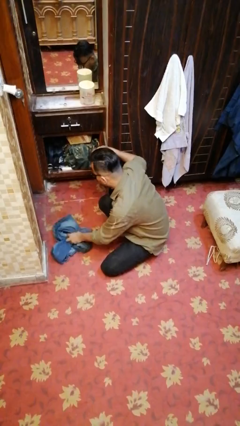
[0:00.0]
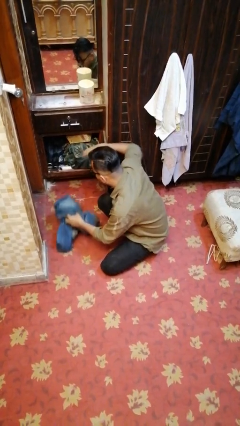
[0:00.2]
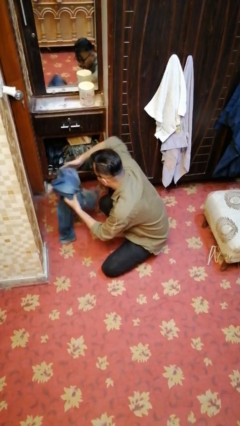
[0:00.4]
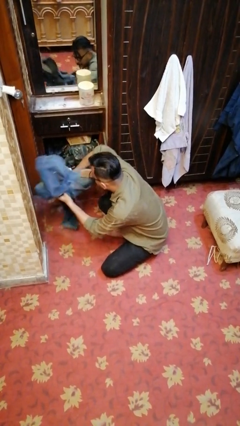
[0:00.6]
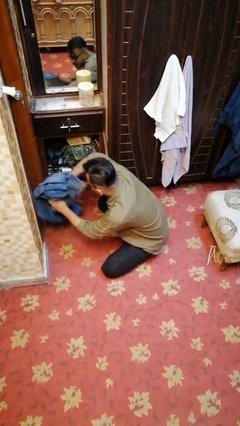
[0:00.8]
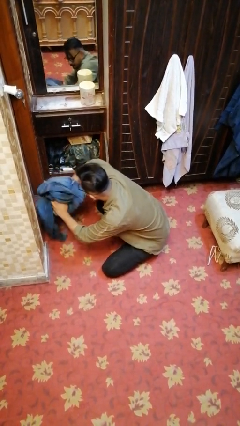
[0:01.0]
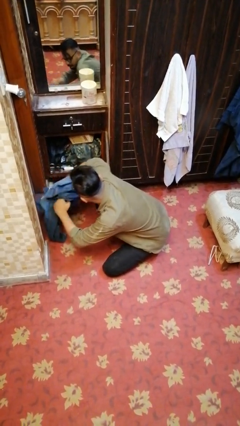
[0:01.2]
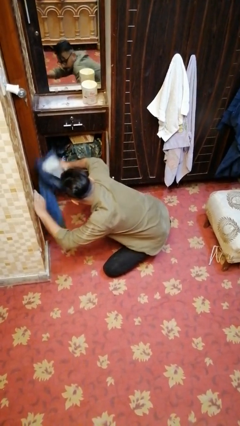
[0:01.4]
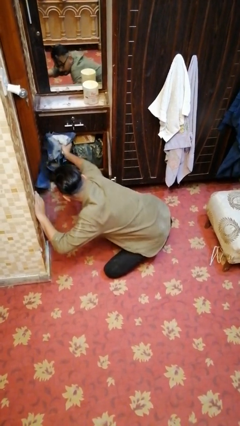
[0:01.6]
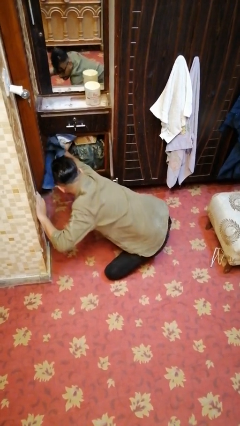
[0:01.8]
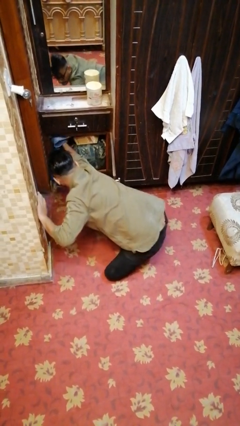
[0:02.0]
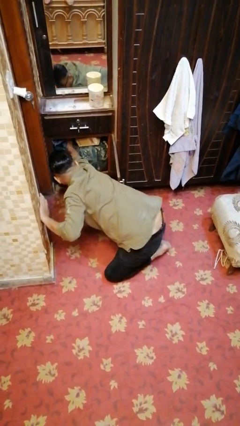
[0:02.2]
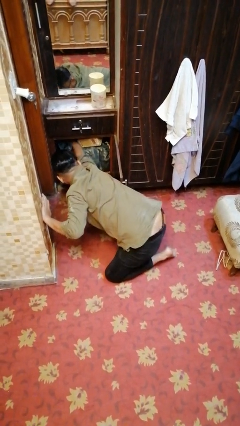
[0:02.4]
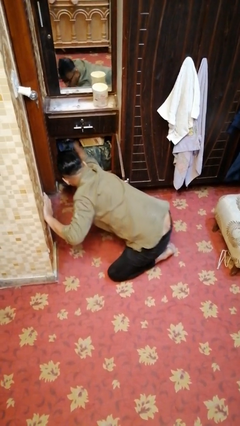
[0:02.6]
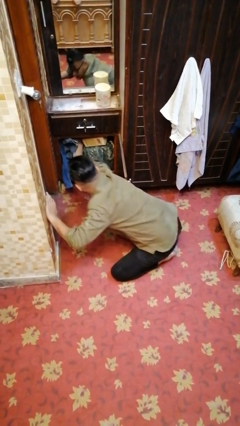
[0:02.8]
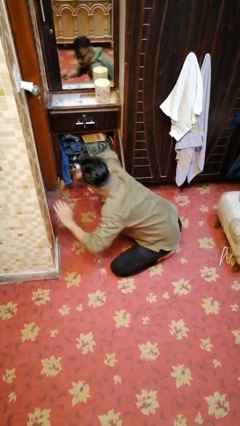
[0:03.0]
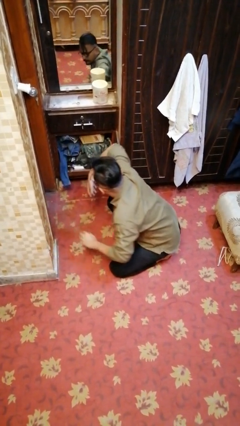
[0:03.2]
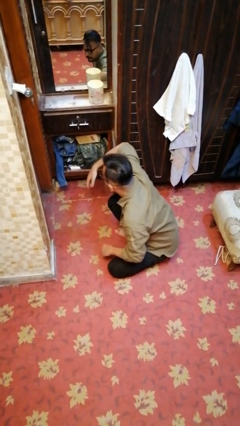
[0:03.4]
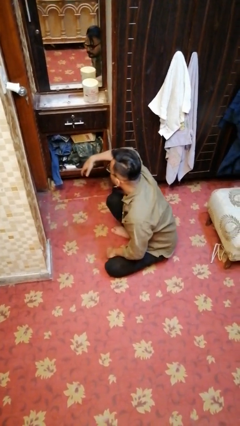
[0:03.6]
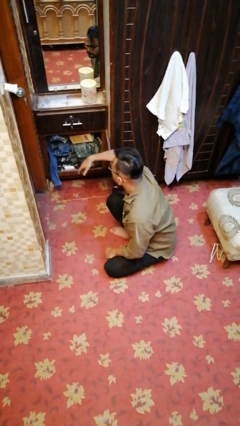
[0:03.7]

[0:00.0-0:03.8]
person puts clothes into dresser

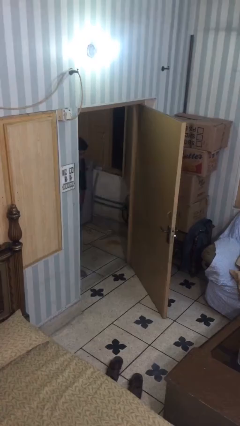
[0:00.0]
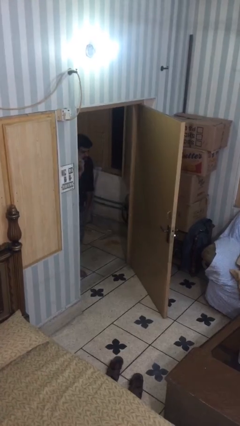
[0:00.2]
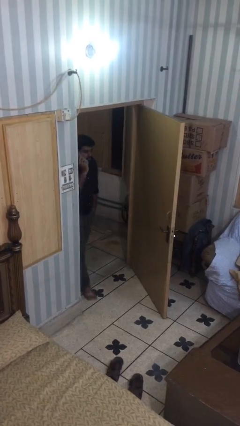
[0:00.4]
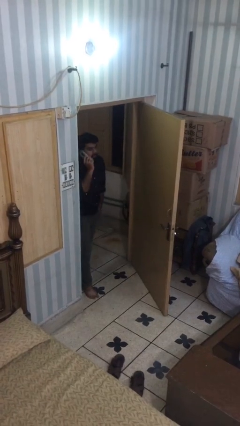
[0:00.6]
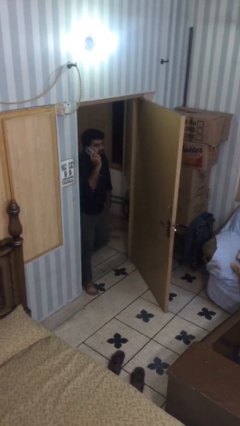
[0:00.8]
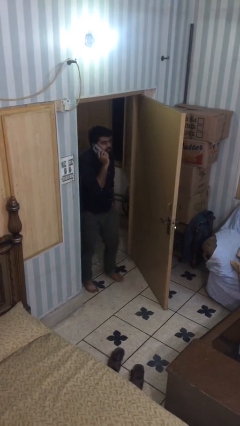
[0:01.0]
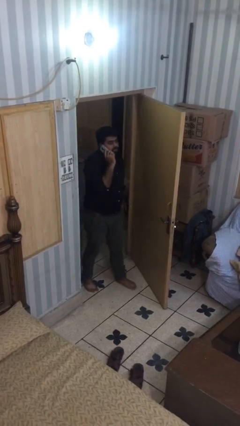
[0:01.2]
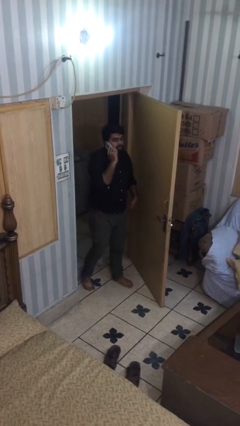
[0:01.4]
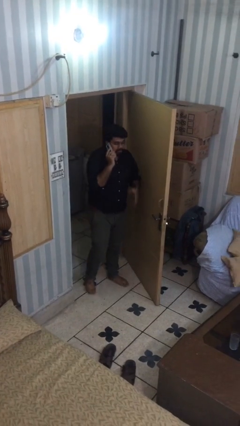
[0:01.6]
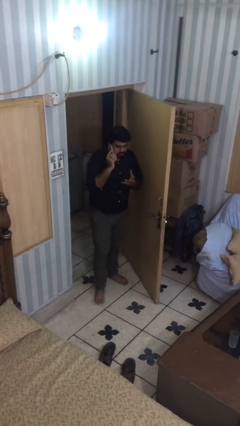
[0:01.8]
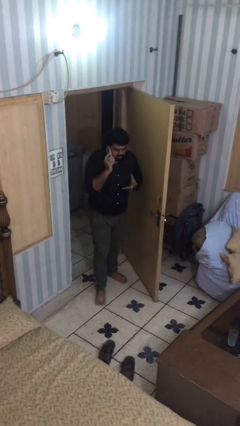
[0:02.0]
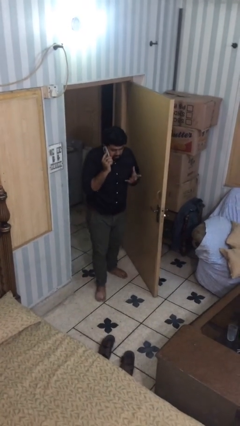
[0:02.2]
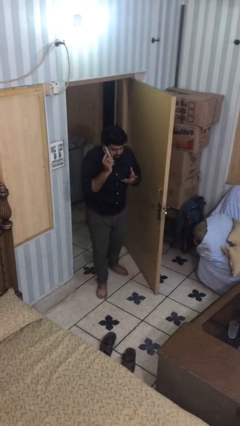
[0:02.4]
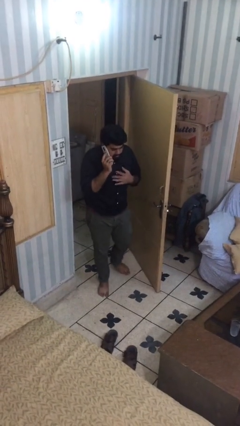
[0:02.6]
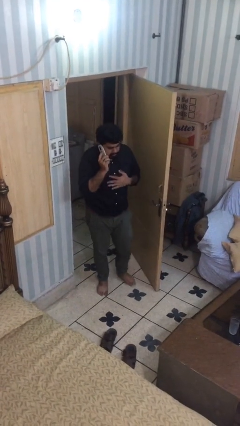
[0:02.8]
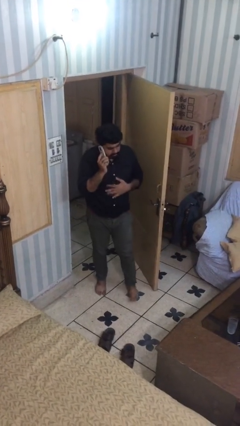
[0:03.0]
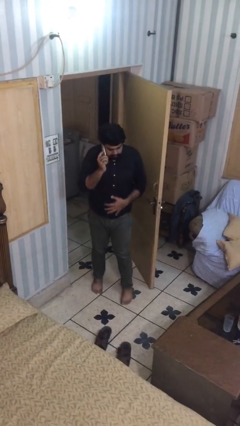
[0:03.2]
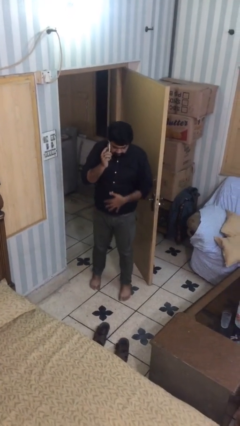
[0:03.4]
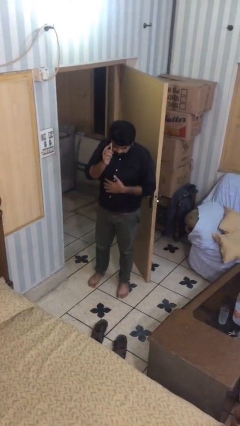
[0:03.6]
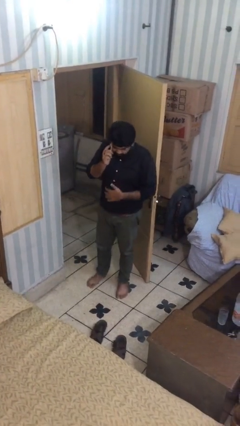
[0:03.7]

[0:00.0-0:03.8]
person enters scene through structure

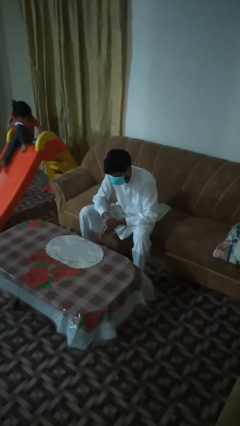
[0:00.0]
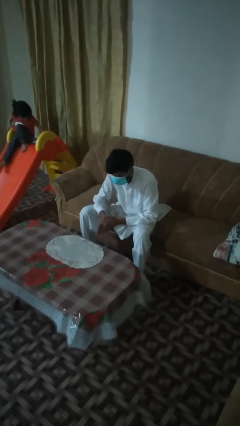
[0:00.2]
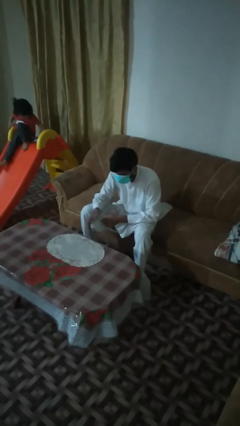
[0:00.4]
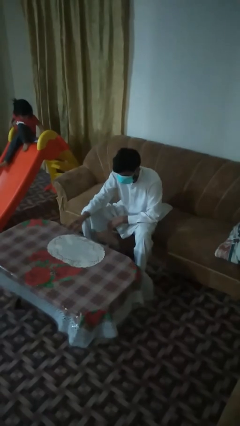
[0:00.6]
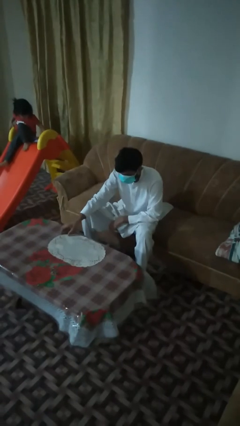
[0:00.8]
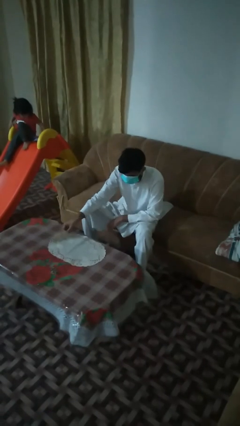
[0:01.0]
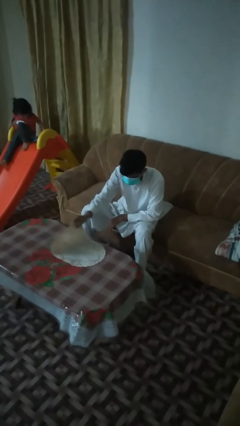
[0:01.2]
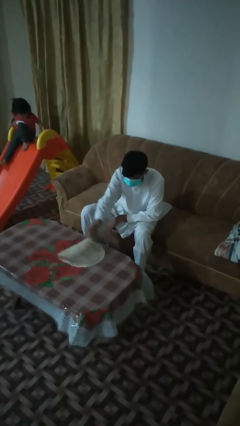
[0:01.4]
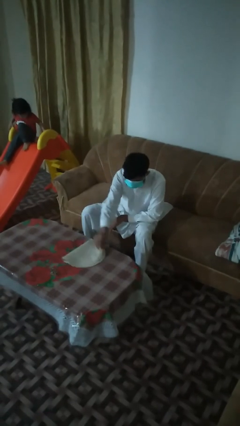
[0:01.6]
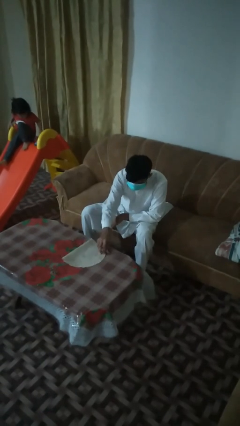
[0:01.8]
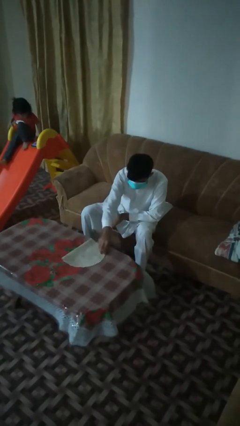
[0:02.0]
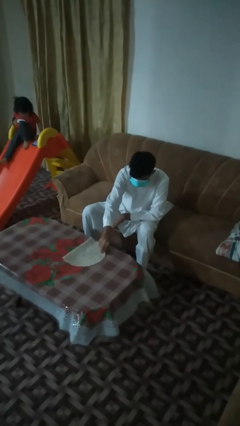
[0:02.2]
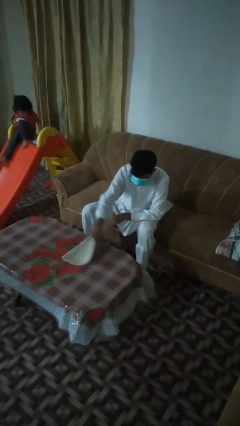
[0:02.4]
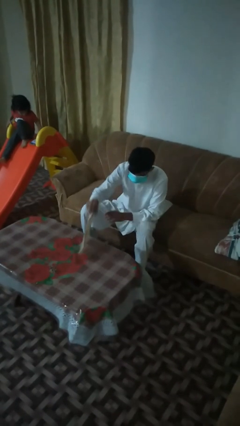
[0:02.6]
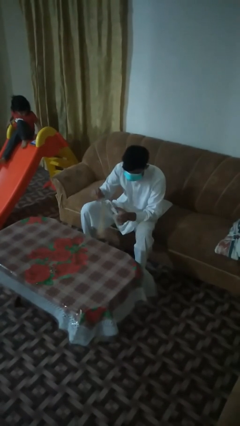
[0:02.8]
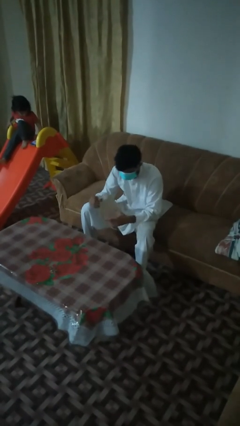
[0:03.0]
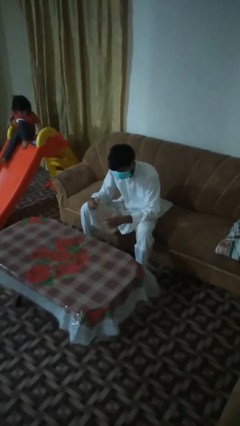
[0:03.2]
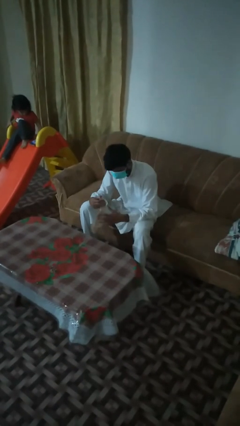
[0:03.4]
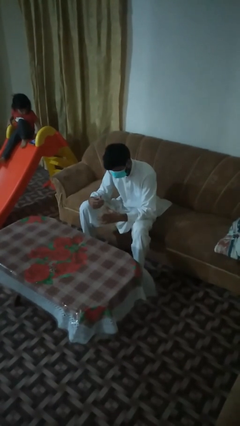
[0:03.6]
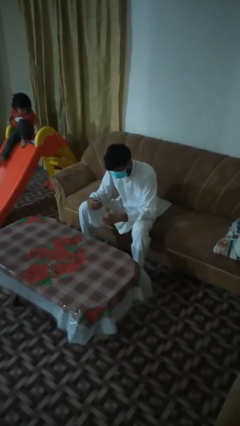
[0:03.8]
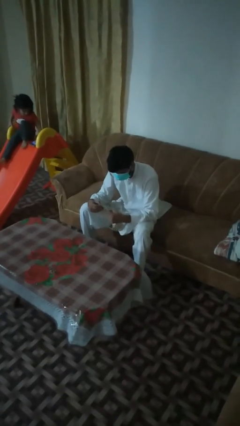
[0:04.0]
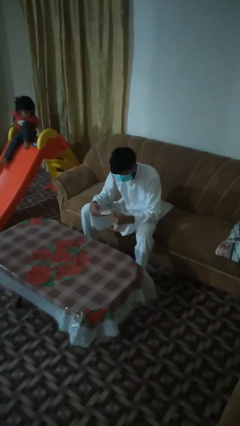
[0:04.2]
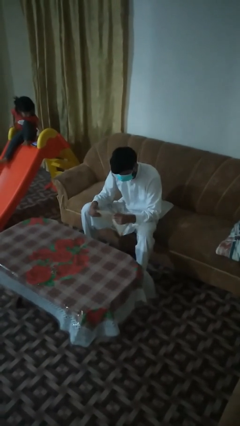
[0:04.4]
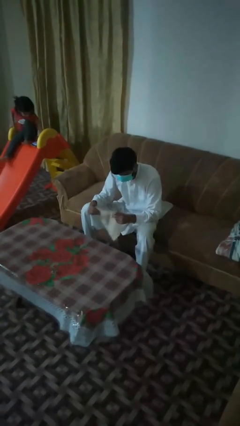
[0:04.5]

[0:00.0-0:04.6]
person folds tablecloth

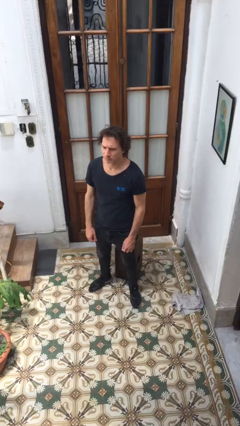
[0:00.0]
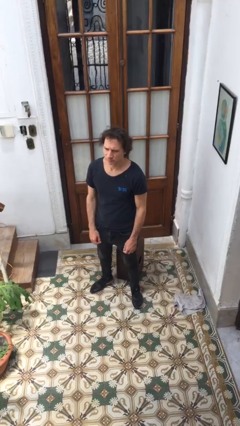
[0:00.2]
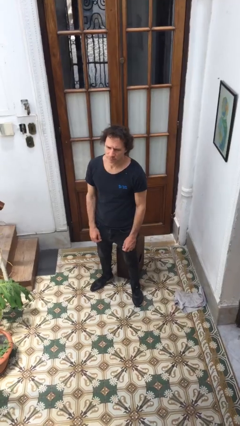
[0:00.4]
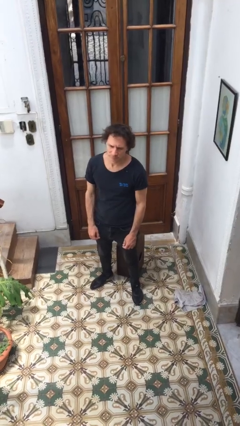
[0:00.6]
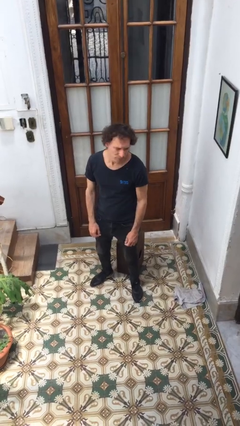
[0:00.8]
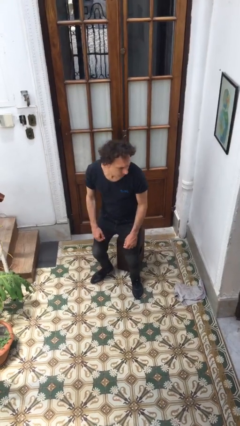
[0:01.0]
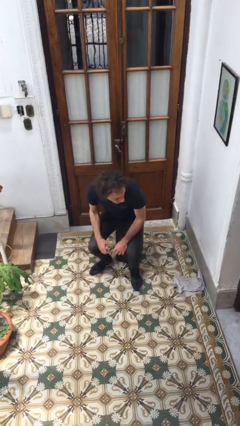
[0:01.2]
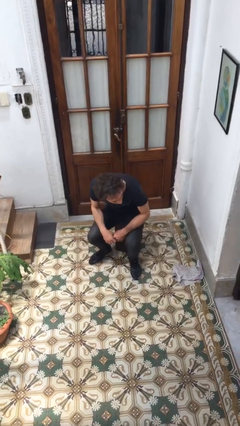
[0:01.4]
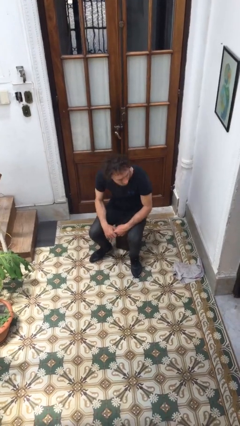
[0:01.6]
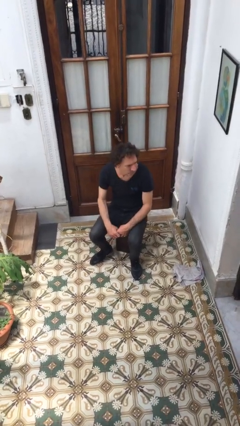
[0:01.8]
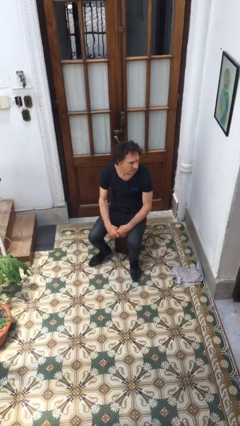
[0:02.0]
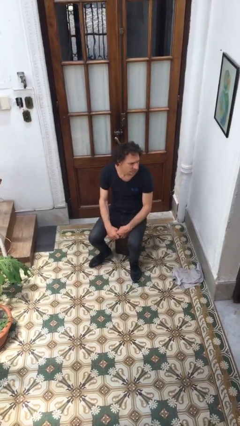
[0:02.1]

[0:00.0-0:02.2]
person sits down

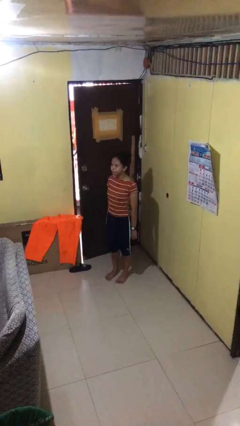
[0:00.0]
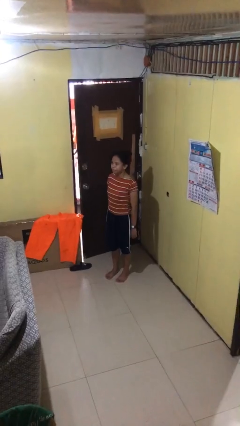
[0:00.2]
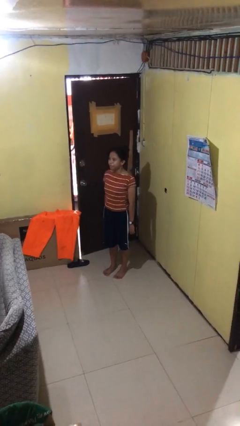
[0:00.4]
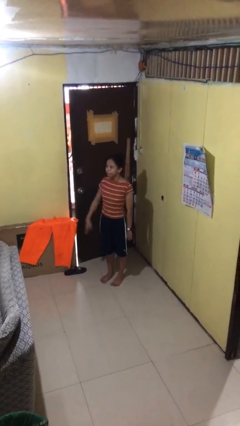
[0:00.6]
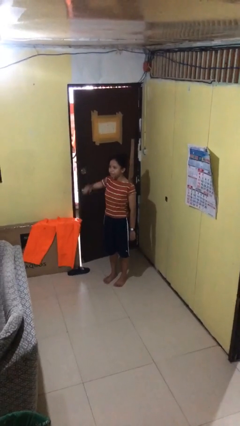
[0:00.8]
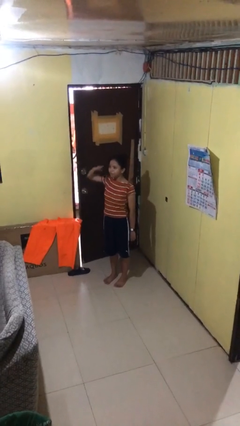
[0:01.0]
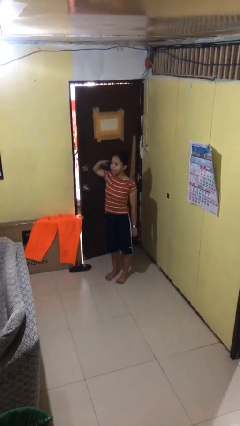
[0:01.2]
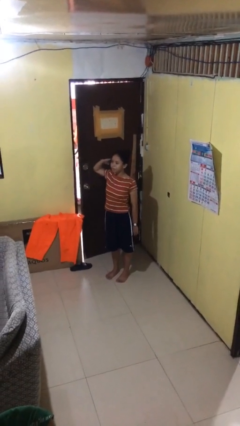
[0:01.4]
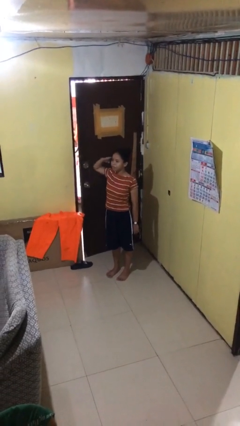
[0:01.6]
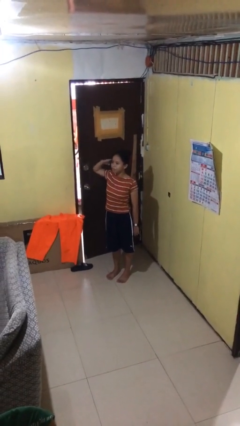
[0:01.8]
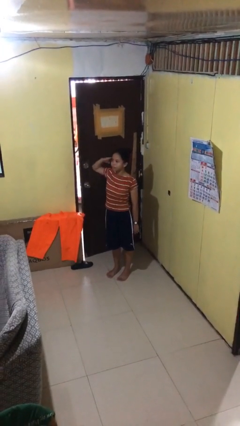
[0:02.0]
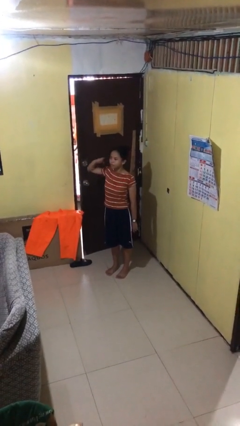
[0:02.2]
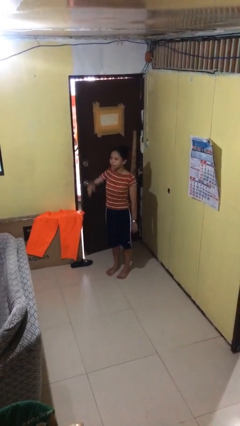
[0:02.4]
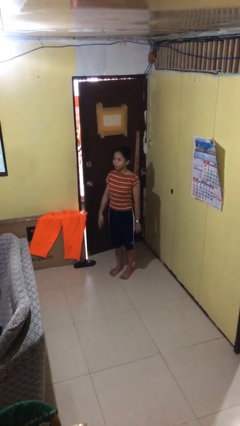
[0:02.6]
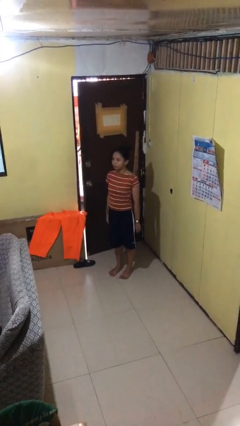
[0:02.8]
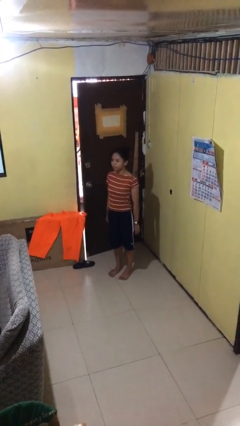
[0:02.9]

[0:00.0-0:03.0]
person salutes
